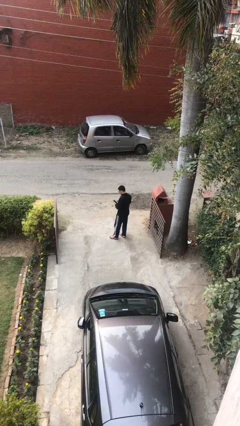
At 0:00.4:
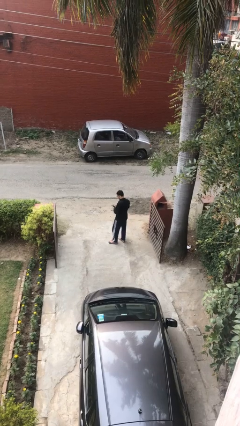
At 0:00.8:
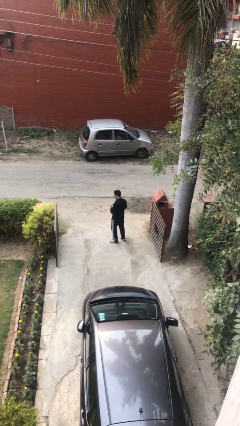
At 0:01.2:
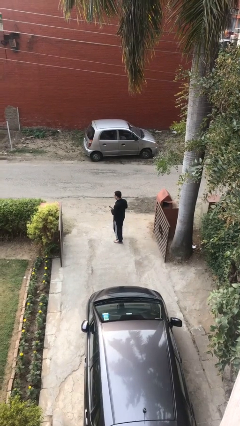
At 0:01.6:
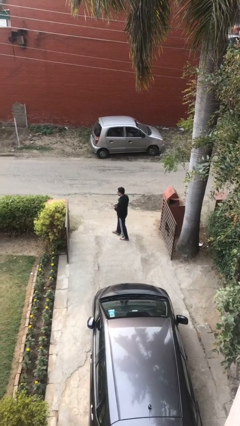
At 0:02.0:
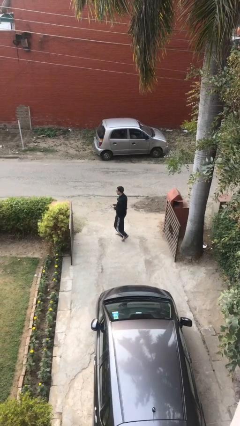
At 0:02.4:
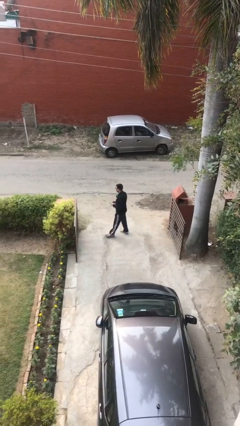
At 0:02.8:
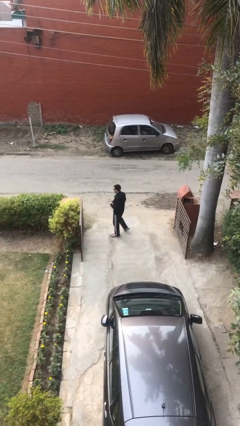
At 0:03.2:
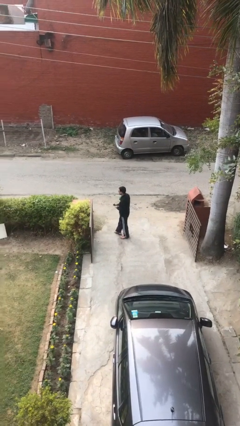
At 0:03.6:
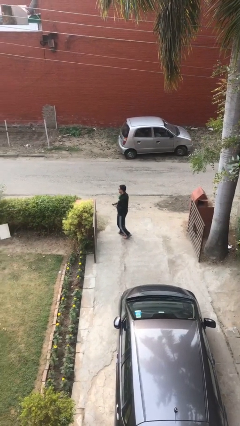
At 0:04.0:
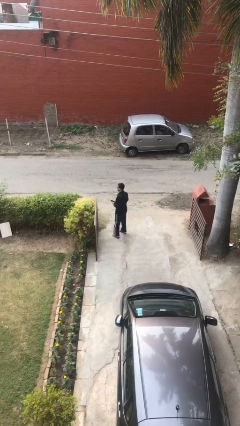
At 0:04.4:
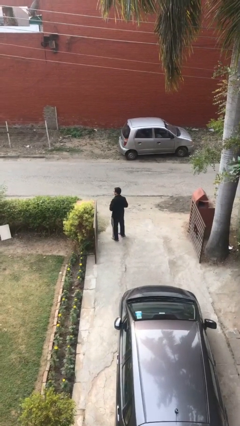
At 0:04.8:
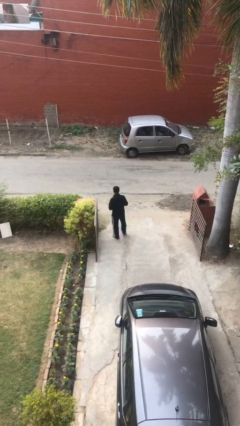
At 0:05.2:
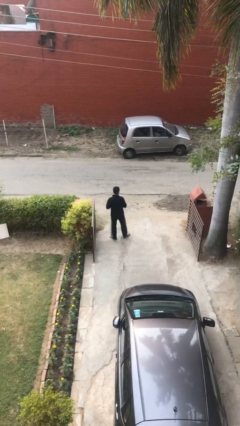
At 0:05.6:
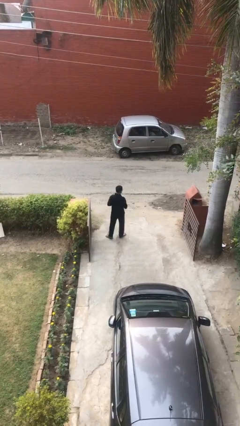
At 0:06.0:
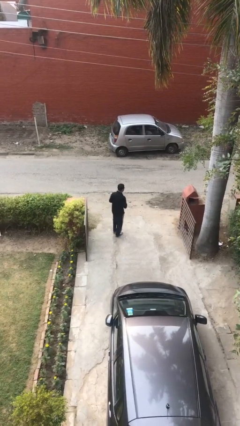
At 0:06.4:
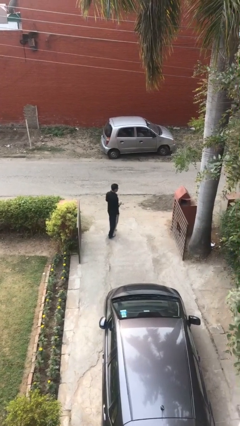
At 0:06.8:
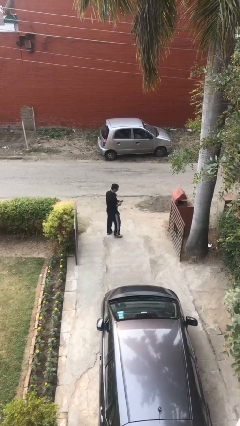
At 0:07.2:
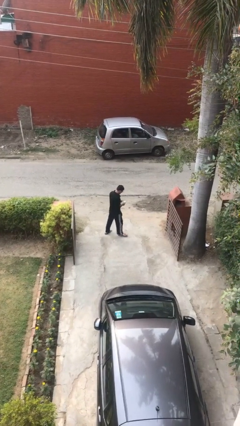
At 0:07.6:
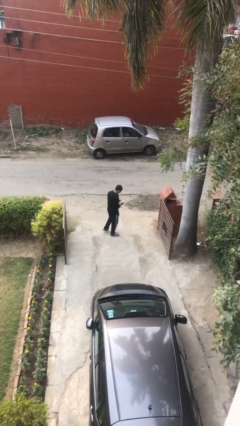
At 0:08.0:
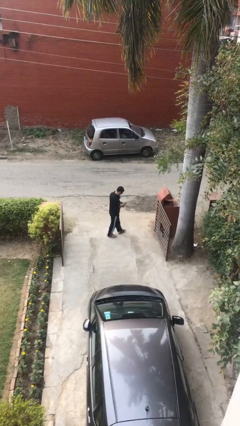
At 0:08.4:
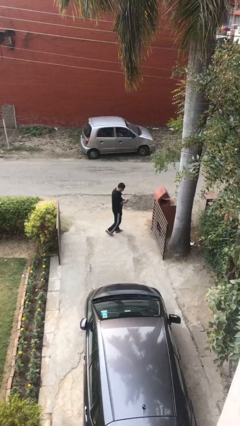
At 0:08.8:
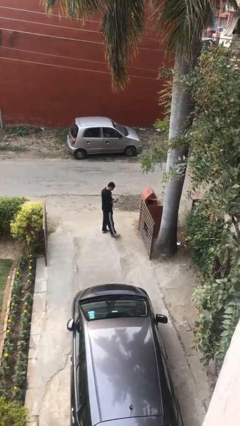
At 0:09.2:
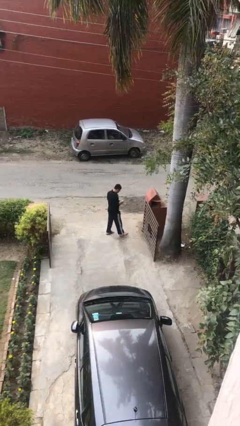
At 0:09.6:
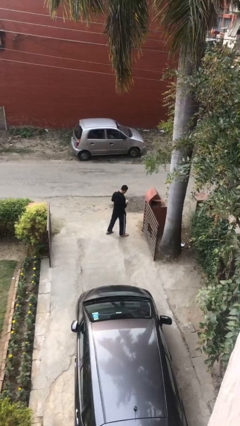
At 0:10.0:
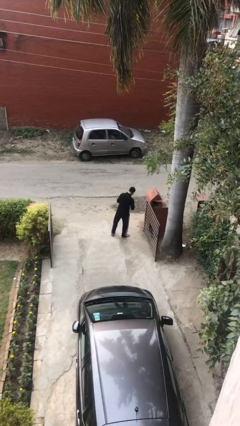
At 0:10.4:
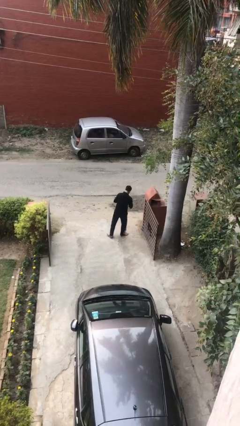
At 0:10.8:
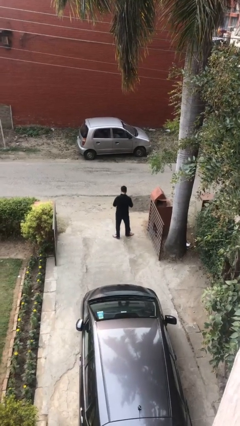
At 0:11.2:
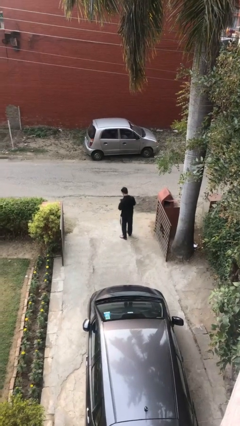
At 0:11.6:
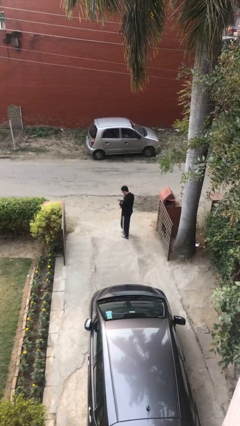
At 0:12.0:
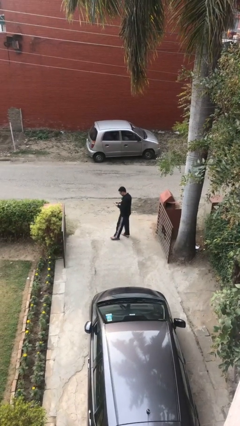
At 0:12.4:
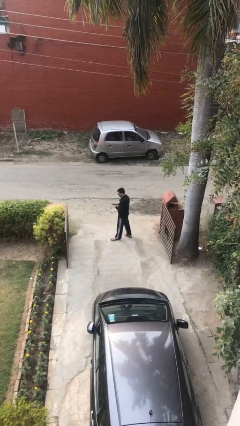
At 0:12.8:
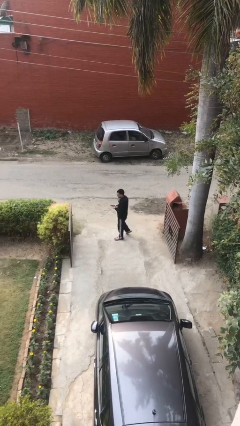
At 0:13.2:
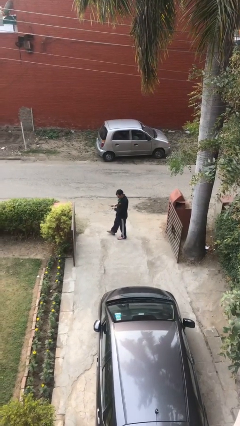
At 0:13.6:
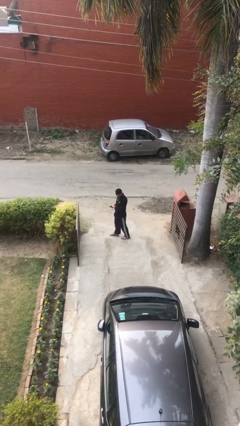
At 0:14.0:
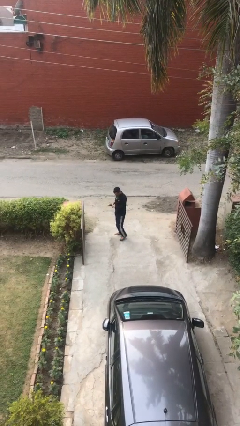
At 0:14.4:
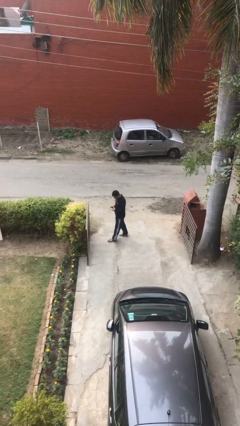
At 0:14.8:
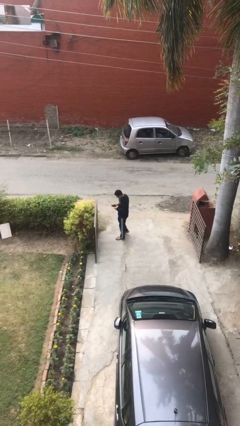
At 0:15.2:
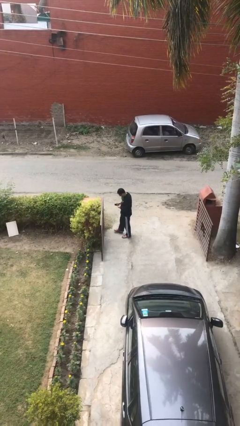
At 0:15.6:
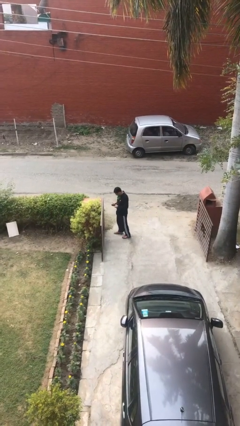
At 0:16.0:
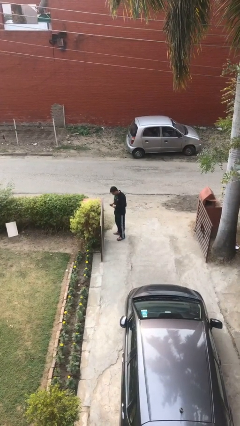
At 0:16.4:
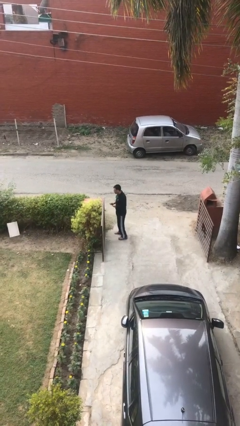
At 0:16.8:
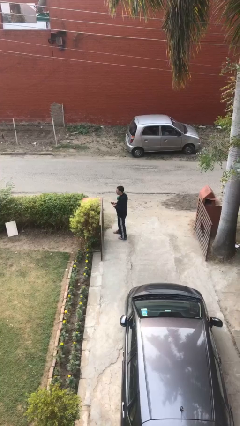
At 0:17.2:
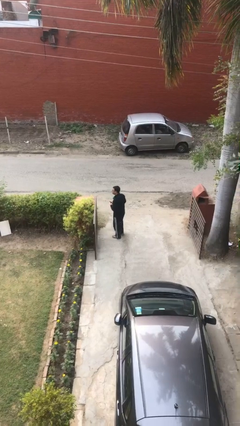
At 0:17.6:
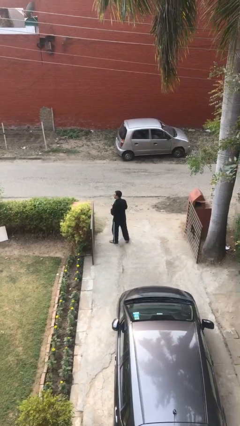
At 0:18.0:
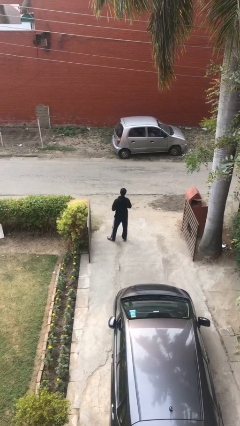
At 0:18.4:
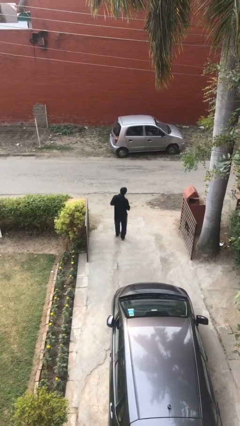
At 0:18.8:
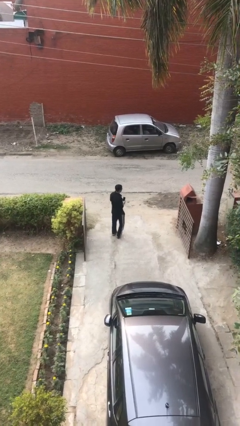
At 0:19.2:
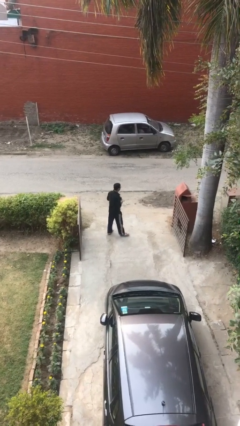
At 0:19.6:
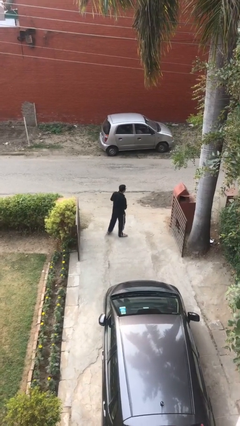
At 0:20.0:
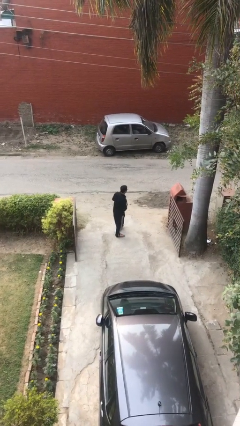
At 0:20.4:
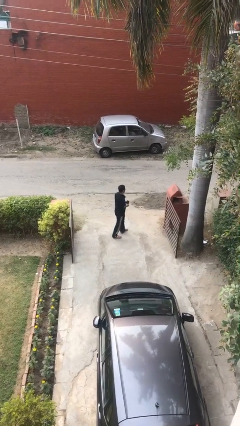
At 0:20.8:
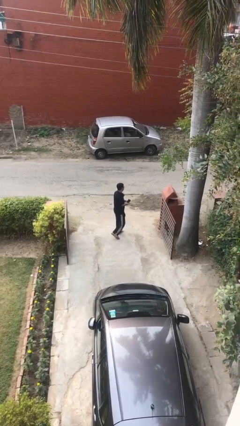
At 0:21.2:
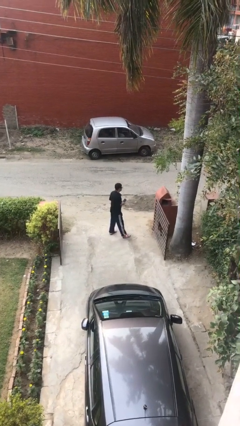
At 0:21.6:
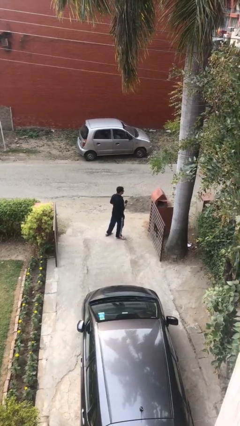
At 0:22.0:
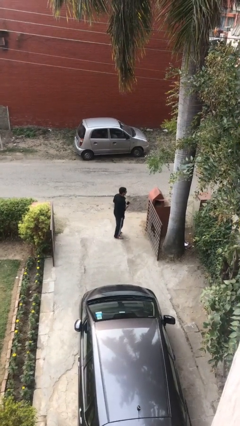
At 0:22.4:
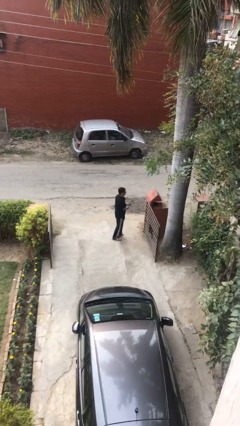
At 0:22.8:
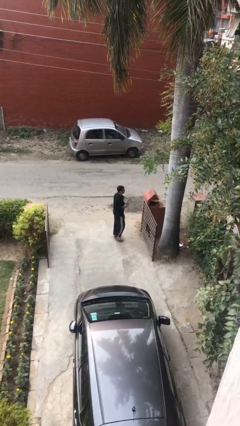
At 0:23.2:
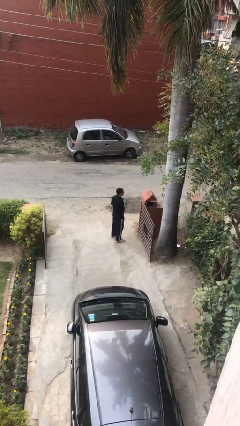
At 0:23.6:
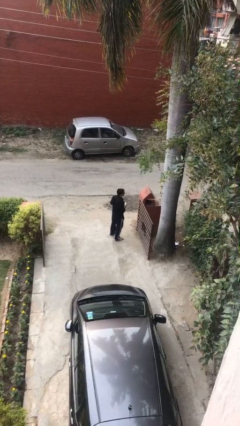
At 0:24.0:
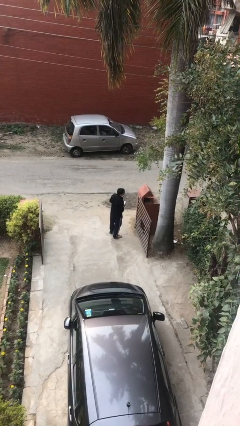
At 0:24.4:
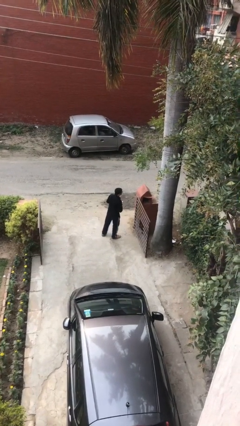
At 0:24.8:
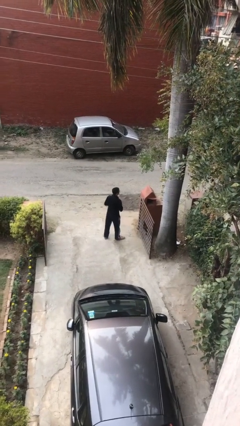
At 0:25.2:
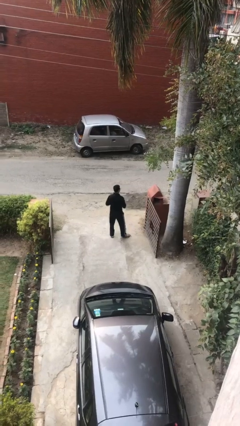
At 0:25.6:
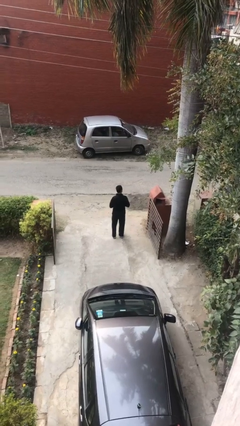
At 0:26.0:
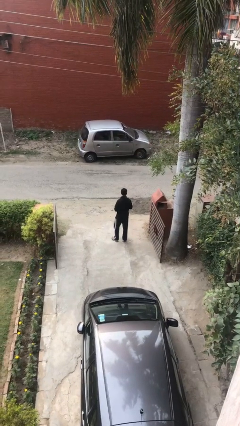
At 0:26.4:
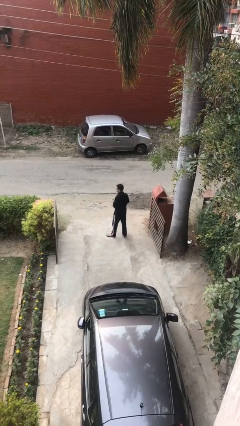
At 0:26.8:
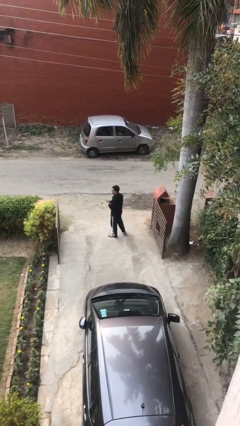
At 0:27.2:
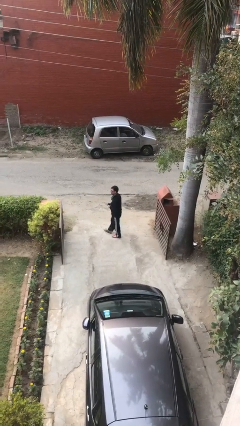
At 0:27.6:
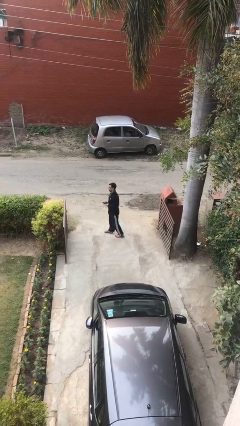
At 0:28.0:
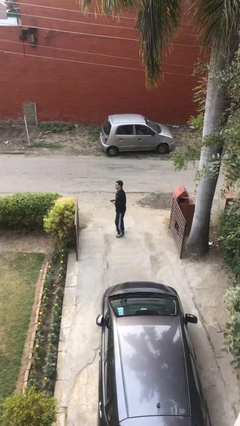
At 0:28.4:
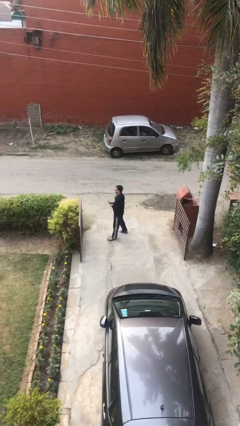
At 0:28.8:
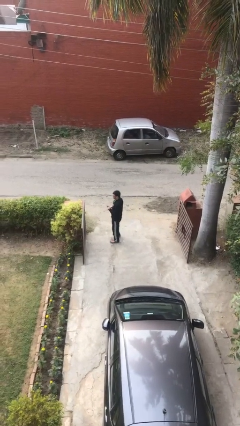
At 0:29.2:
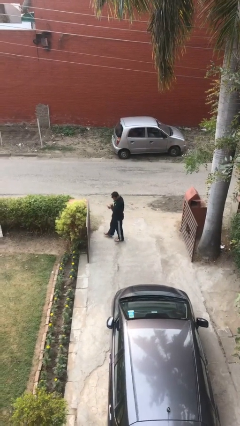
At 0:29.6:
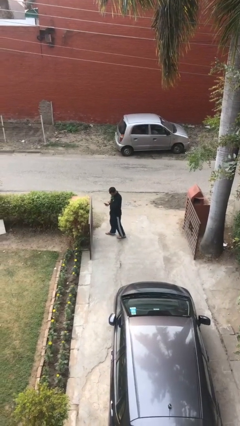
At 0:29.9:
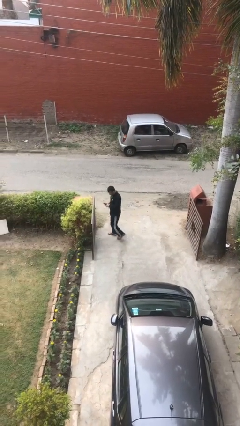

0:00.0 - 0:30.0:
person walks

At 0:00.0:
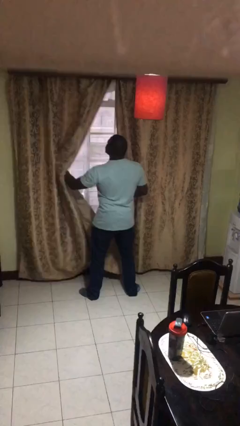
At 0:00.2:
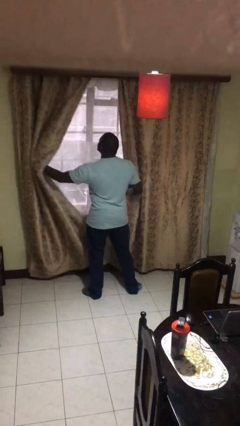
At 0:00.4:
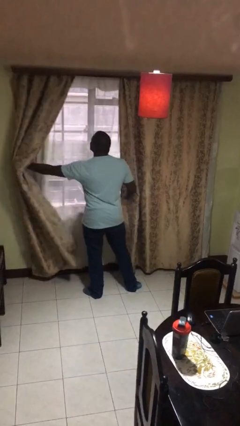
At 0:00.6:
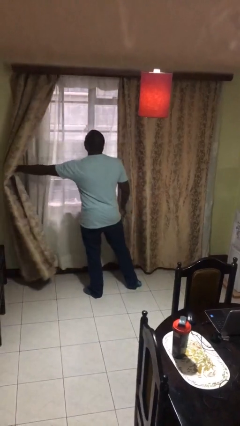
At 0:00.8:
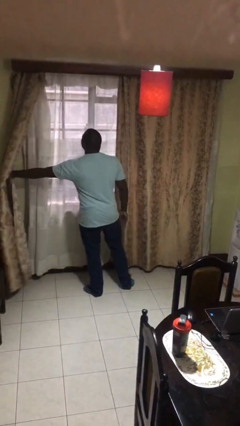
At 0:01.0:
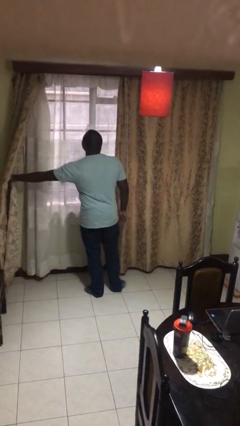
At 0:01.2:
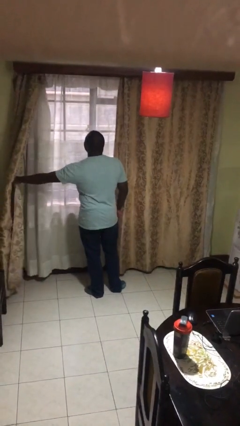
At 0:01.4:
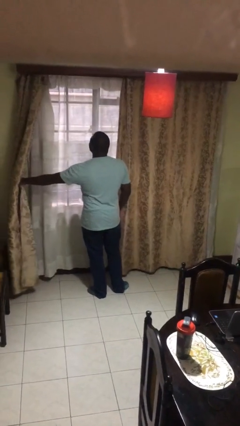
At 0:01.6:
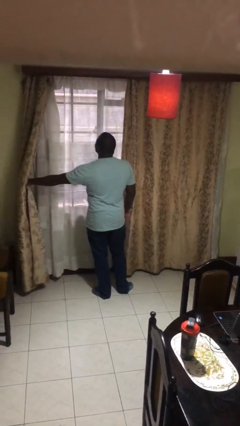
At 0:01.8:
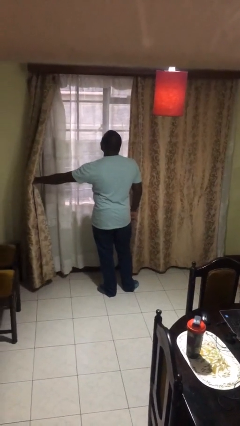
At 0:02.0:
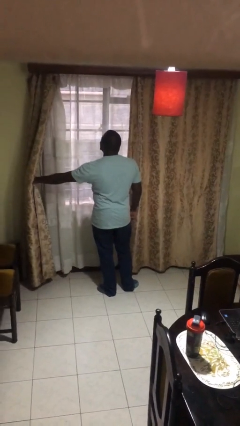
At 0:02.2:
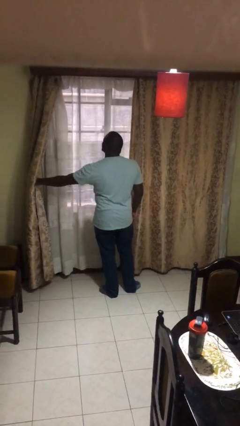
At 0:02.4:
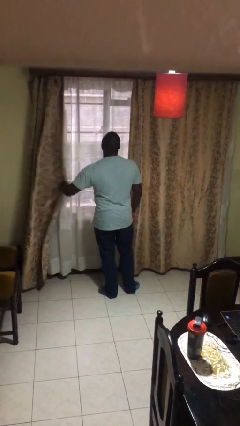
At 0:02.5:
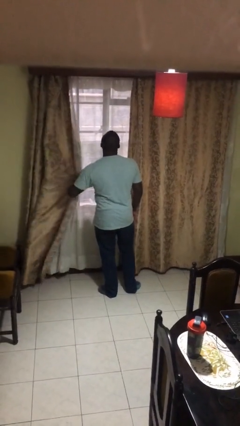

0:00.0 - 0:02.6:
person opens curtains

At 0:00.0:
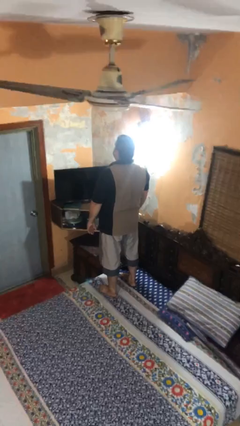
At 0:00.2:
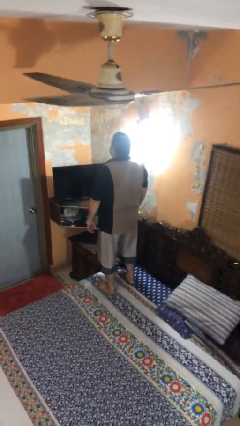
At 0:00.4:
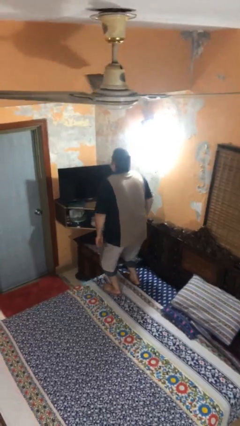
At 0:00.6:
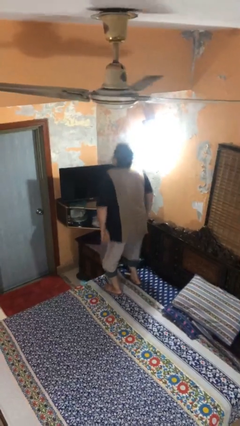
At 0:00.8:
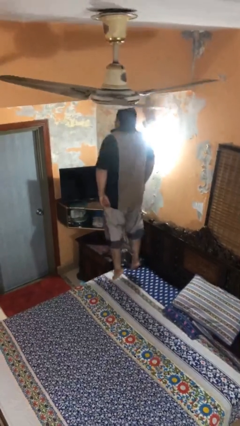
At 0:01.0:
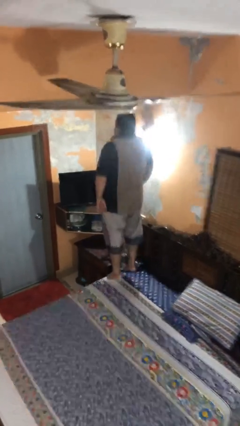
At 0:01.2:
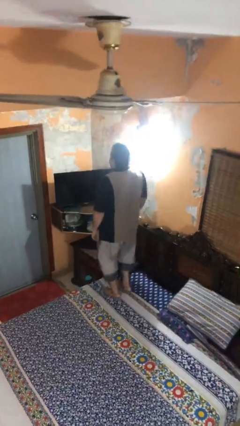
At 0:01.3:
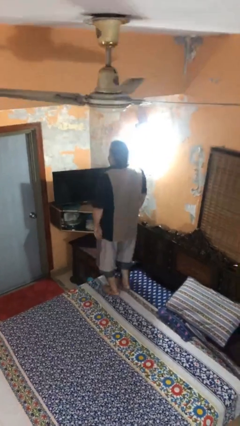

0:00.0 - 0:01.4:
person jumps on bed
